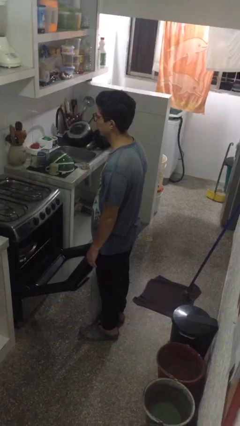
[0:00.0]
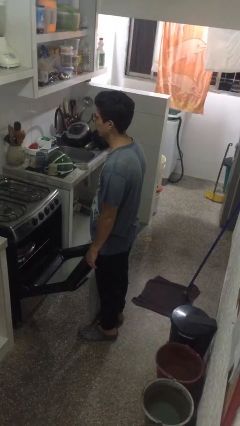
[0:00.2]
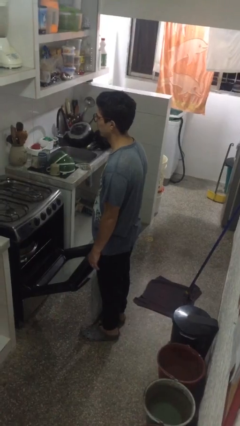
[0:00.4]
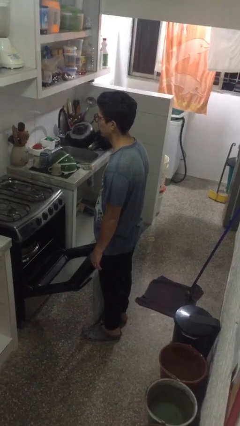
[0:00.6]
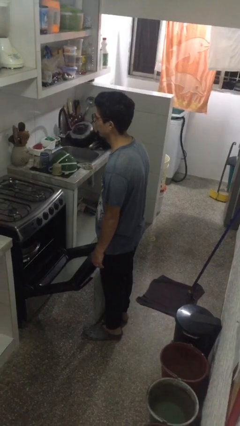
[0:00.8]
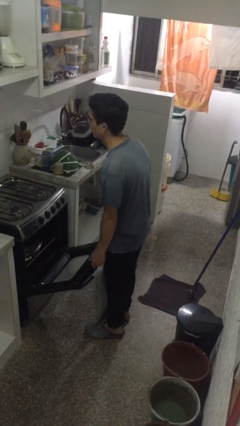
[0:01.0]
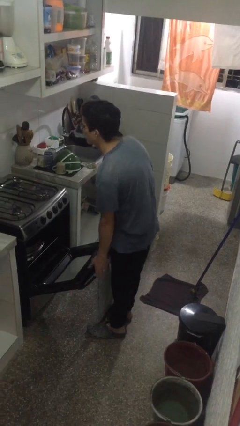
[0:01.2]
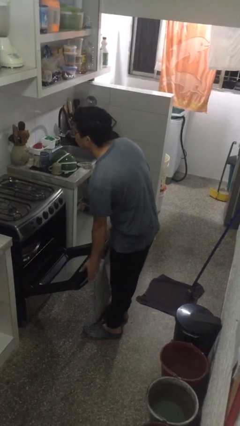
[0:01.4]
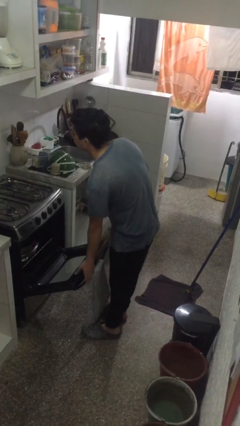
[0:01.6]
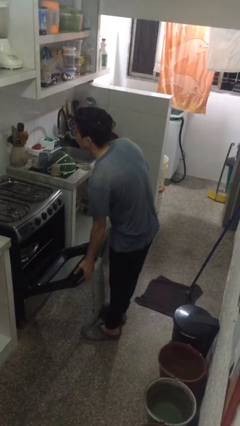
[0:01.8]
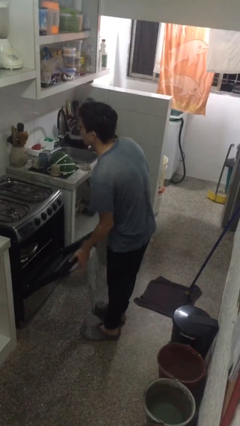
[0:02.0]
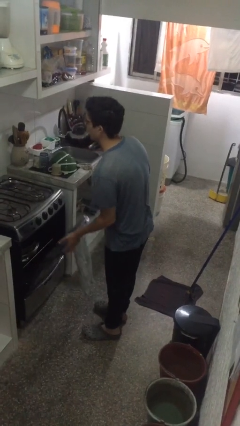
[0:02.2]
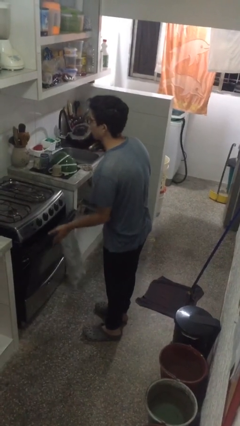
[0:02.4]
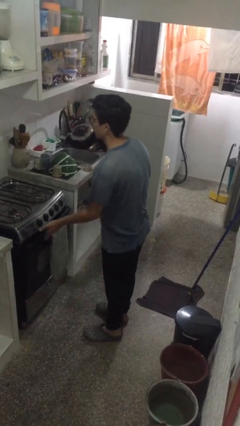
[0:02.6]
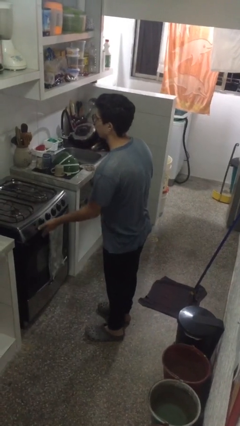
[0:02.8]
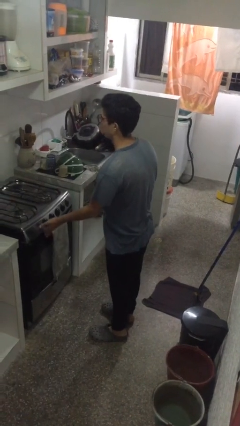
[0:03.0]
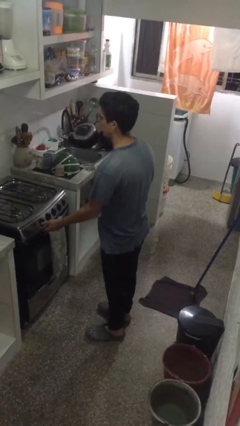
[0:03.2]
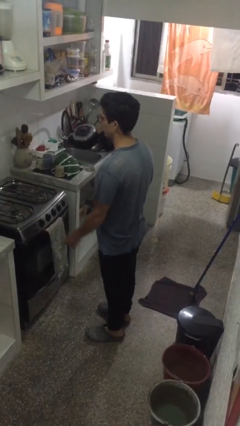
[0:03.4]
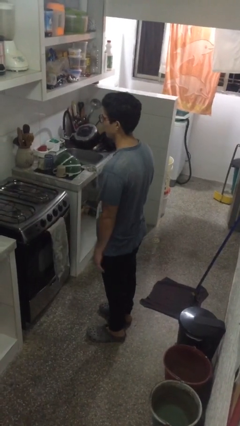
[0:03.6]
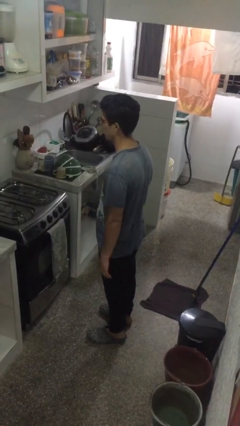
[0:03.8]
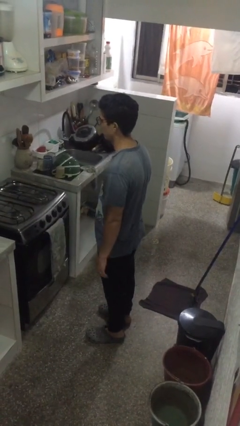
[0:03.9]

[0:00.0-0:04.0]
person closes oven door

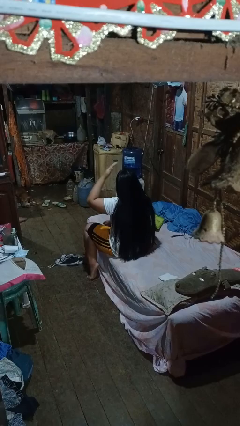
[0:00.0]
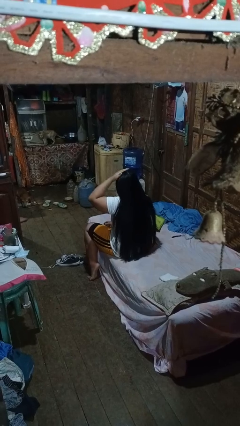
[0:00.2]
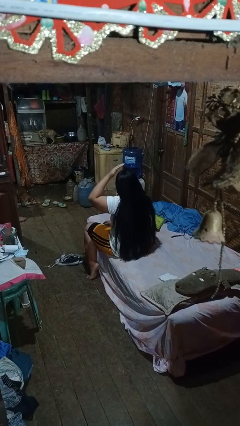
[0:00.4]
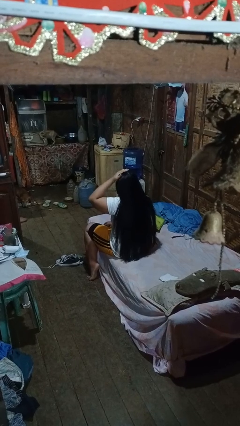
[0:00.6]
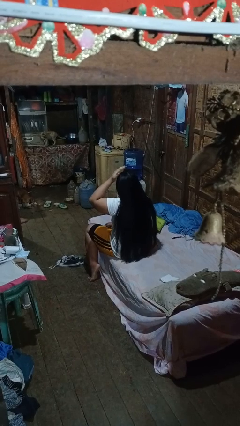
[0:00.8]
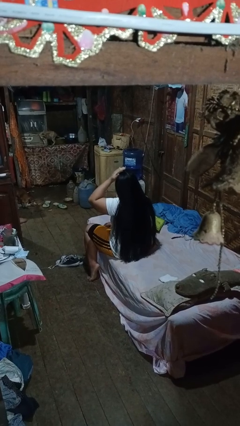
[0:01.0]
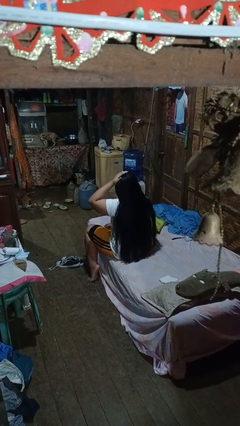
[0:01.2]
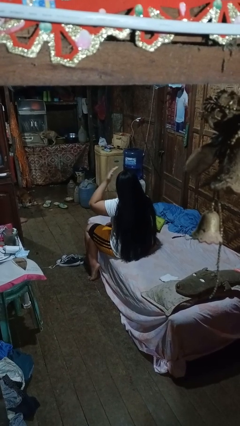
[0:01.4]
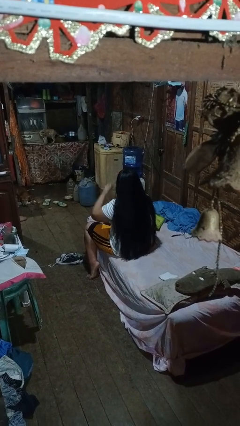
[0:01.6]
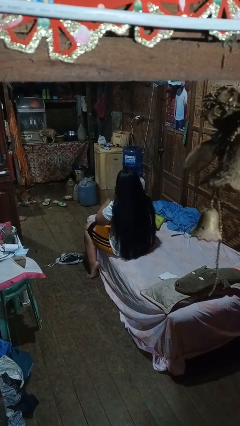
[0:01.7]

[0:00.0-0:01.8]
person pats head

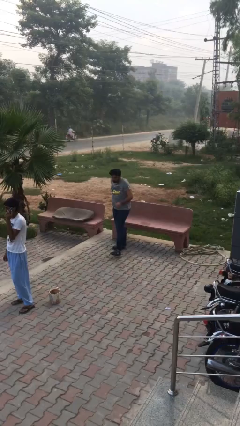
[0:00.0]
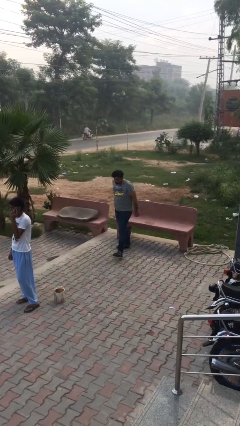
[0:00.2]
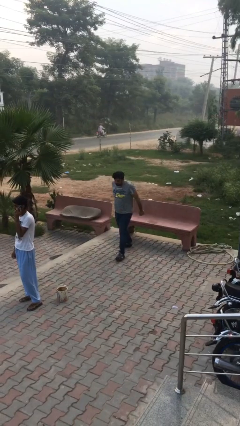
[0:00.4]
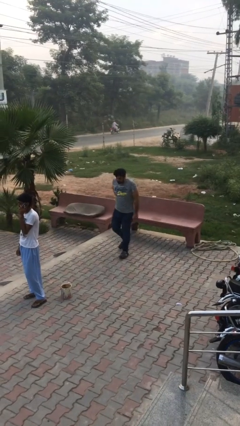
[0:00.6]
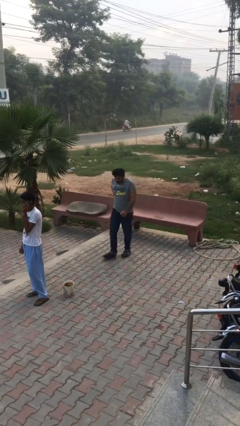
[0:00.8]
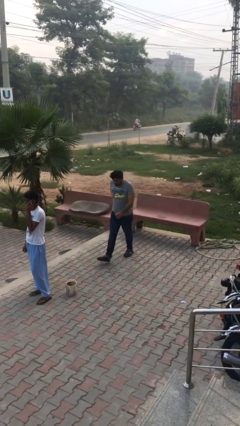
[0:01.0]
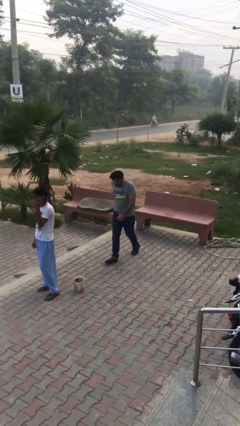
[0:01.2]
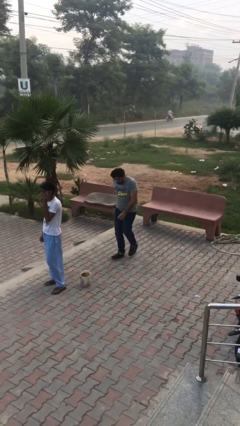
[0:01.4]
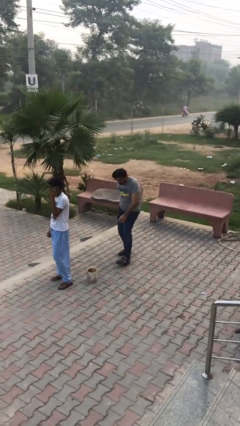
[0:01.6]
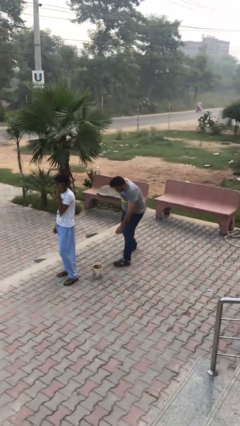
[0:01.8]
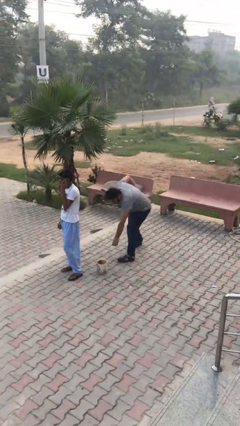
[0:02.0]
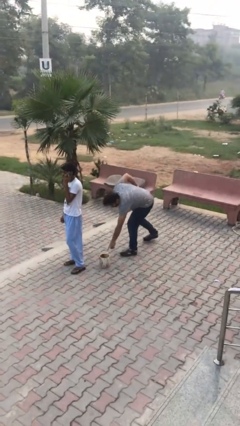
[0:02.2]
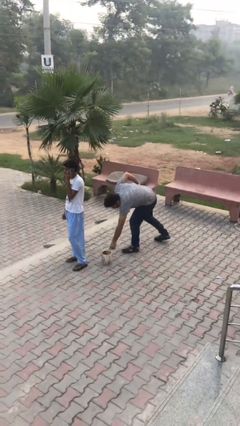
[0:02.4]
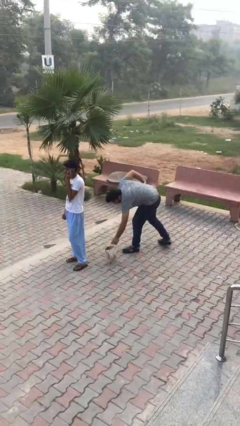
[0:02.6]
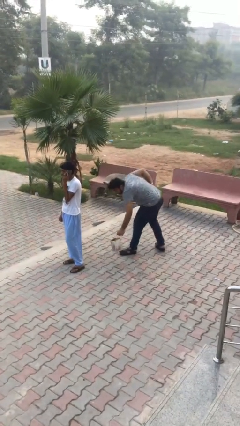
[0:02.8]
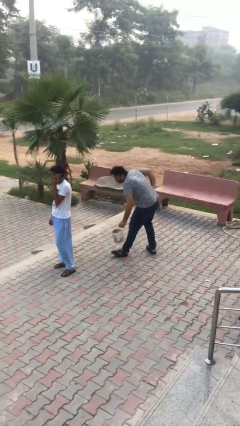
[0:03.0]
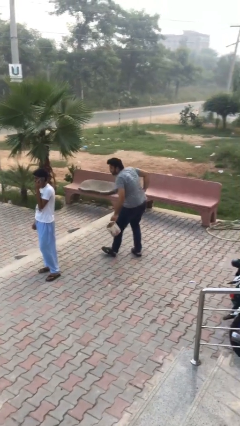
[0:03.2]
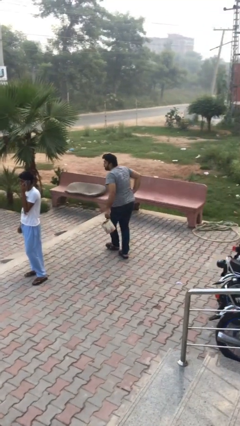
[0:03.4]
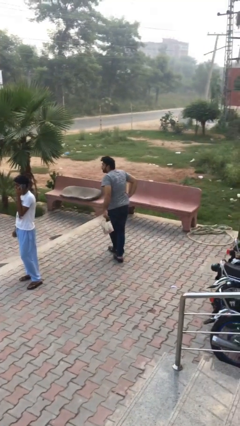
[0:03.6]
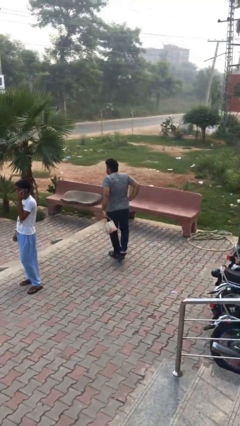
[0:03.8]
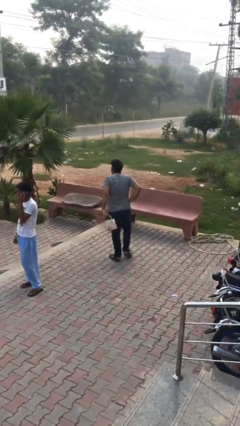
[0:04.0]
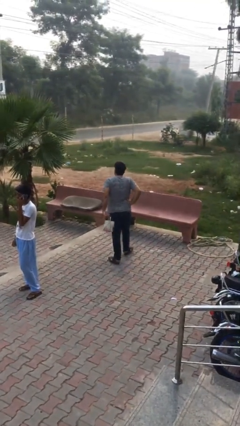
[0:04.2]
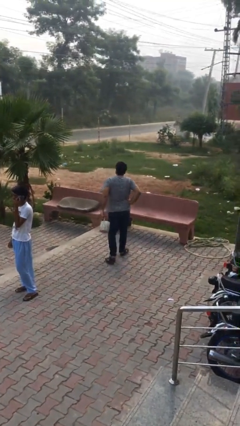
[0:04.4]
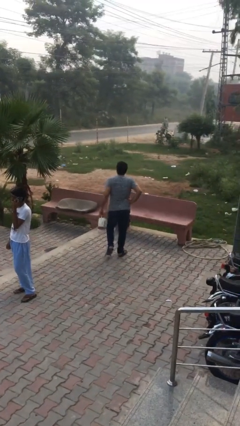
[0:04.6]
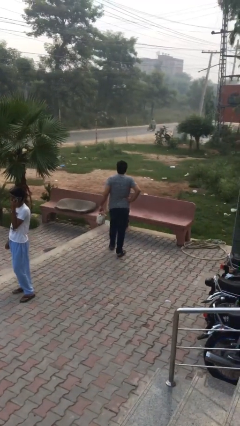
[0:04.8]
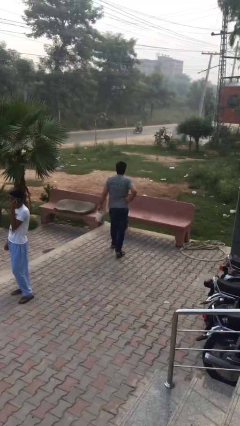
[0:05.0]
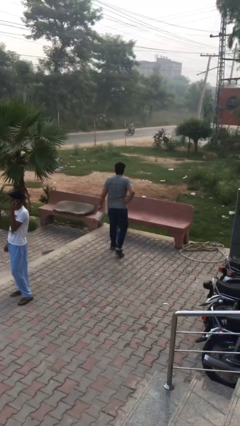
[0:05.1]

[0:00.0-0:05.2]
person steals object from person

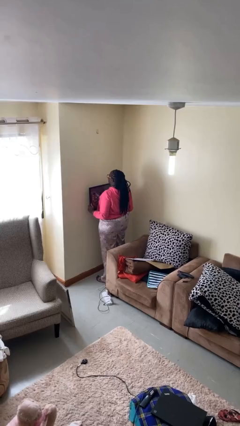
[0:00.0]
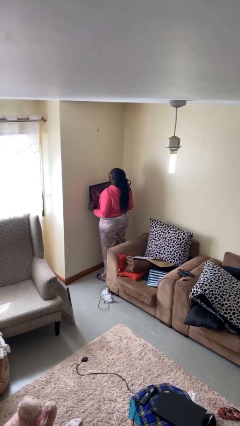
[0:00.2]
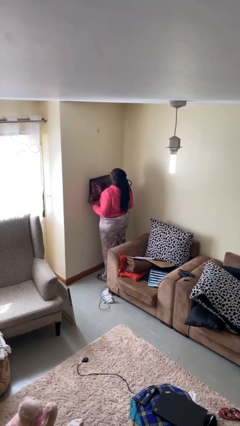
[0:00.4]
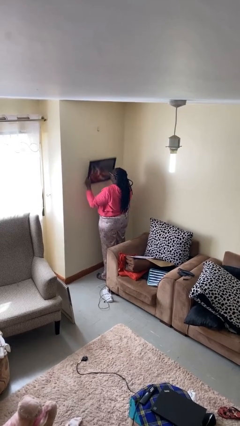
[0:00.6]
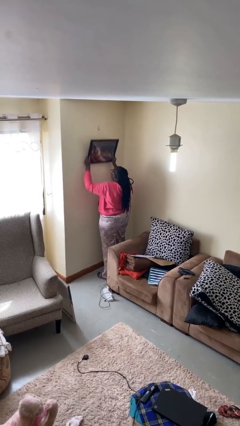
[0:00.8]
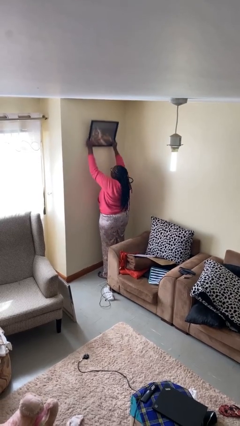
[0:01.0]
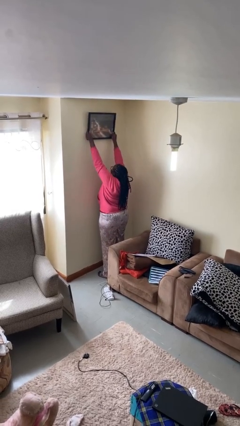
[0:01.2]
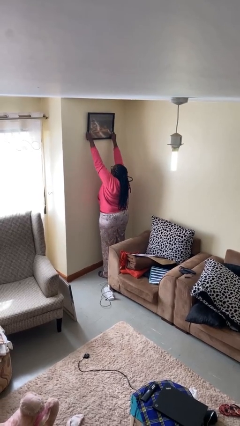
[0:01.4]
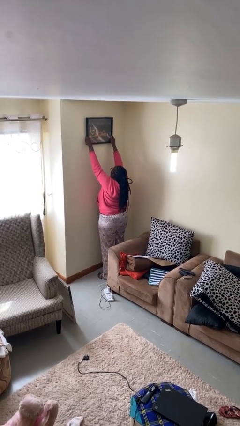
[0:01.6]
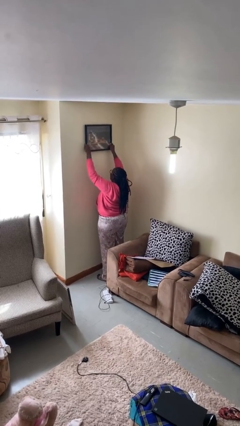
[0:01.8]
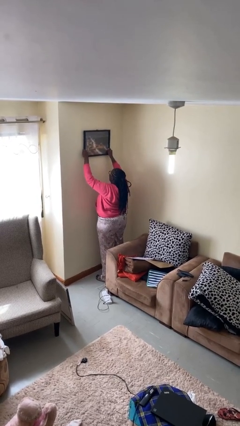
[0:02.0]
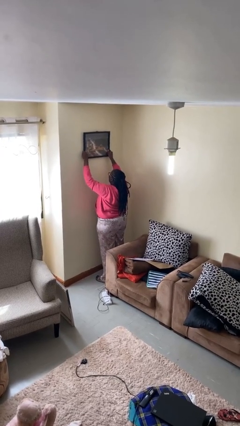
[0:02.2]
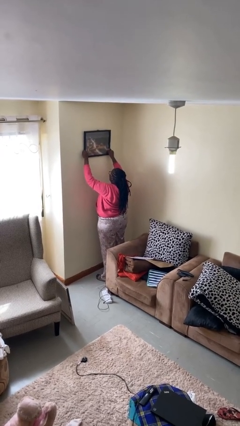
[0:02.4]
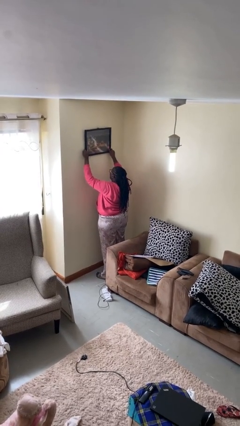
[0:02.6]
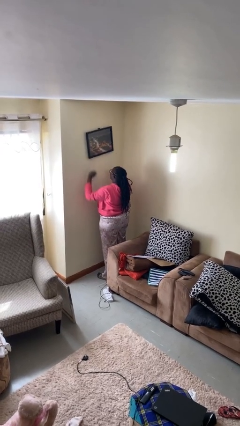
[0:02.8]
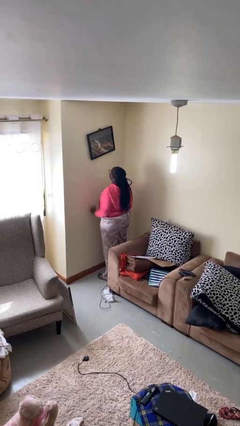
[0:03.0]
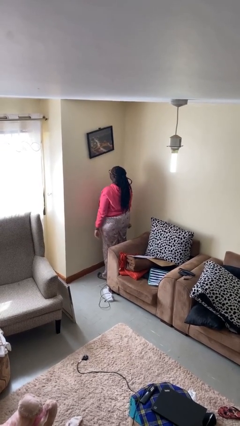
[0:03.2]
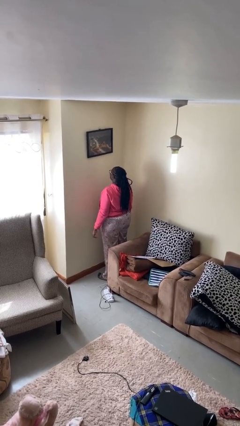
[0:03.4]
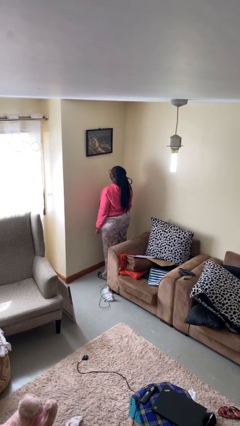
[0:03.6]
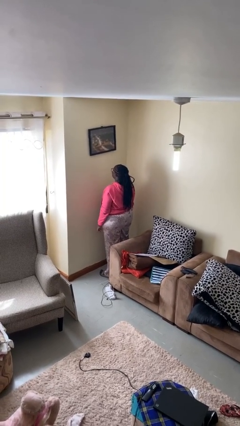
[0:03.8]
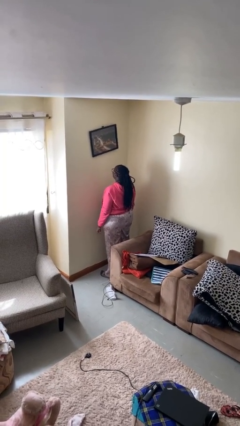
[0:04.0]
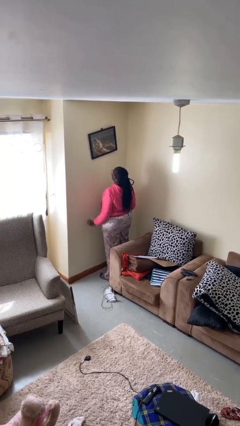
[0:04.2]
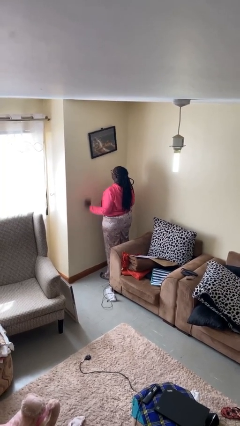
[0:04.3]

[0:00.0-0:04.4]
person puts up picture frame

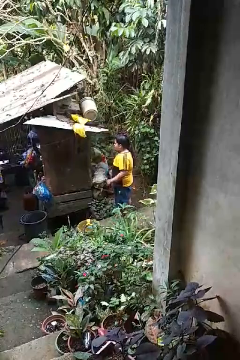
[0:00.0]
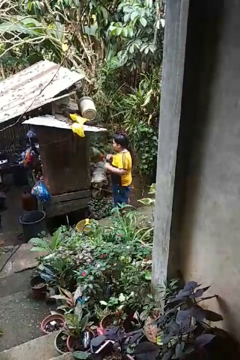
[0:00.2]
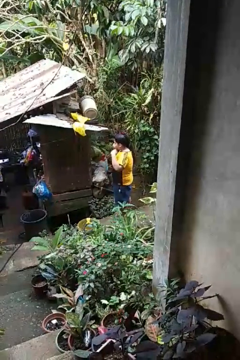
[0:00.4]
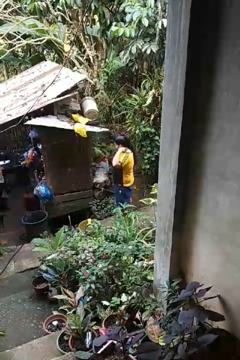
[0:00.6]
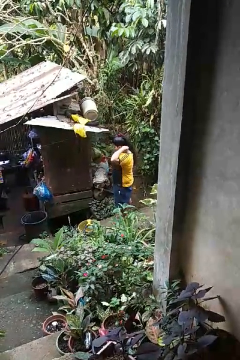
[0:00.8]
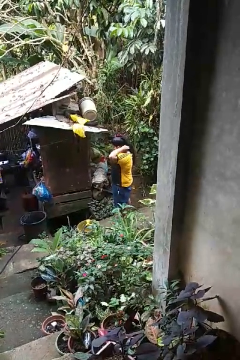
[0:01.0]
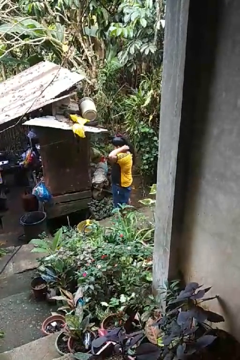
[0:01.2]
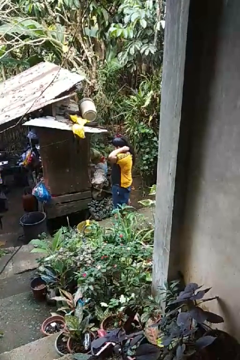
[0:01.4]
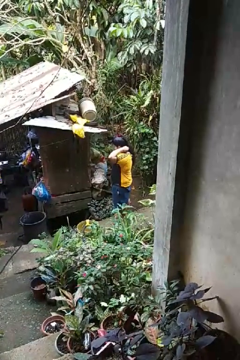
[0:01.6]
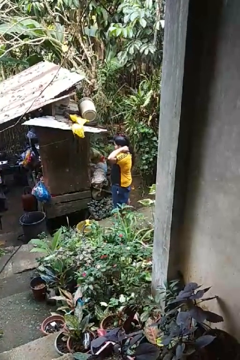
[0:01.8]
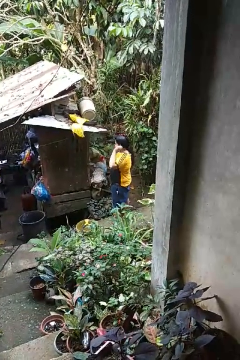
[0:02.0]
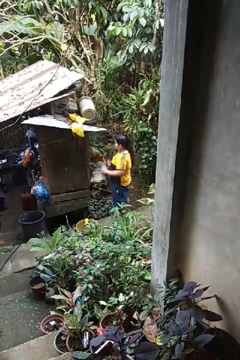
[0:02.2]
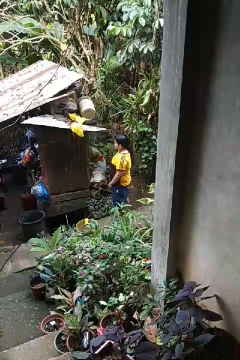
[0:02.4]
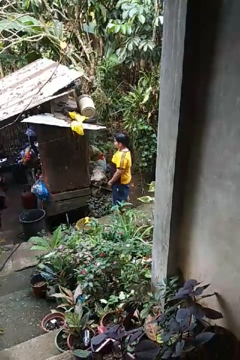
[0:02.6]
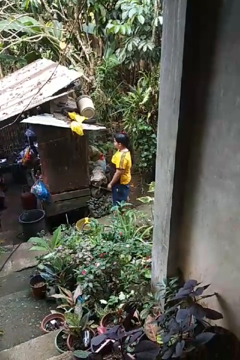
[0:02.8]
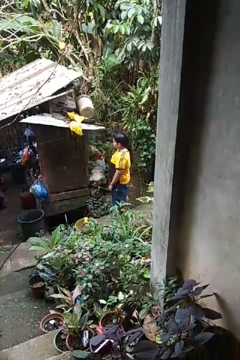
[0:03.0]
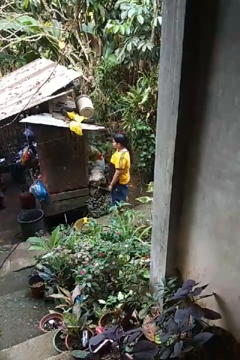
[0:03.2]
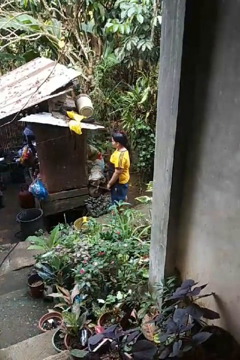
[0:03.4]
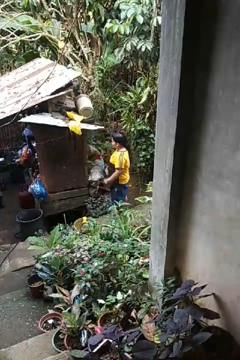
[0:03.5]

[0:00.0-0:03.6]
person puts on necklace
